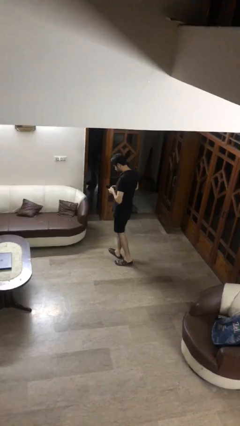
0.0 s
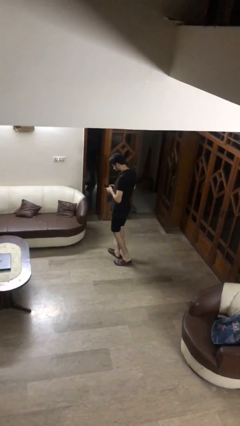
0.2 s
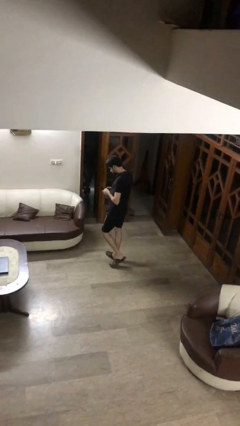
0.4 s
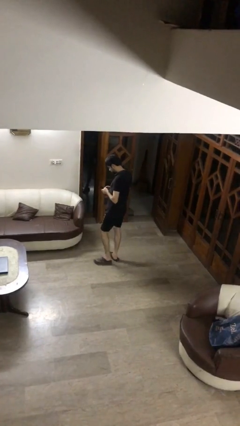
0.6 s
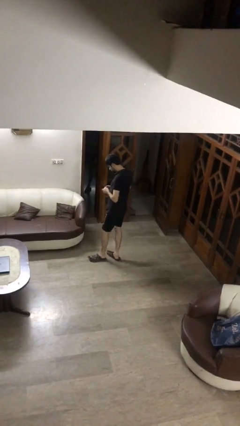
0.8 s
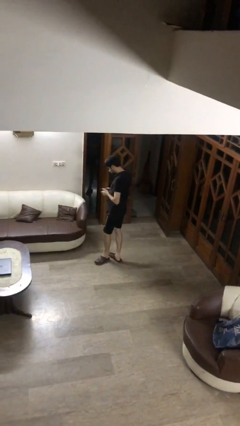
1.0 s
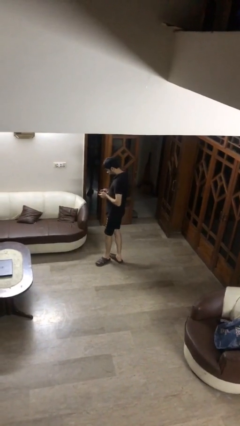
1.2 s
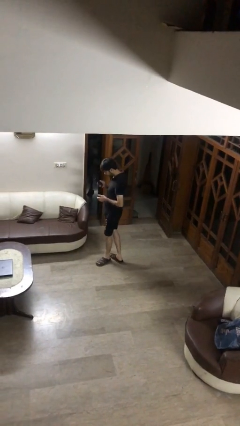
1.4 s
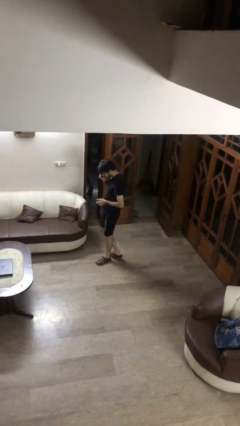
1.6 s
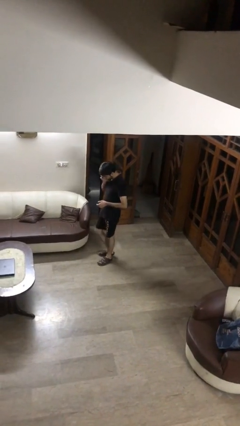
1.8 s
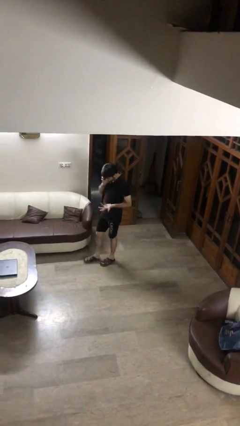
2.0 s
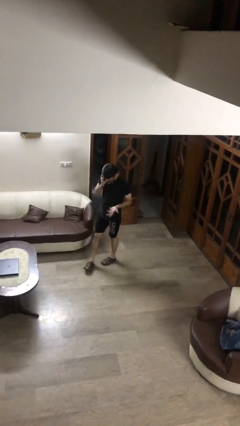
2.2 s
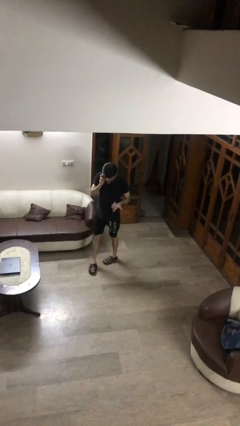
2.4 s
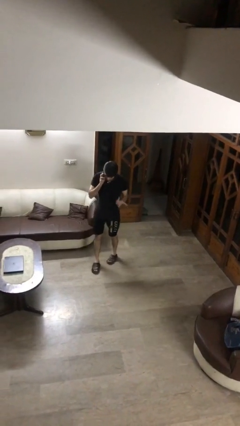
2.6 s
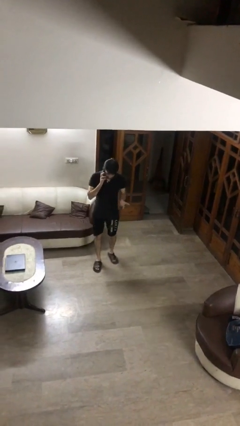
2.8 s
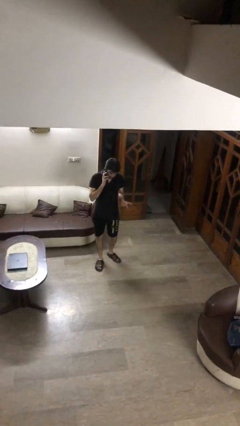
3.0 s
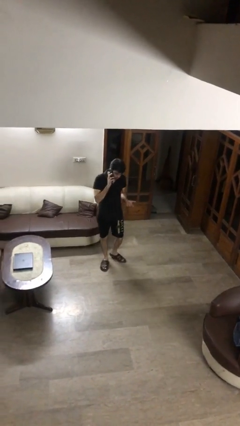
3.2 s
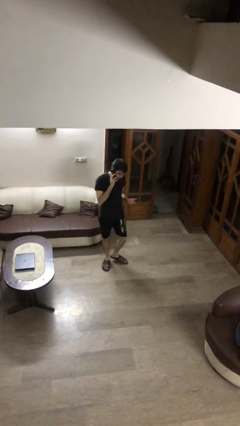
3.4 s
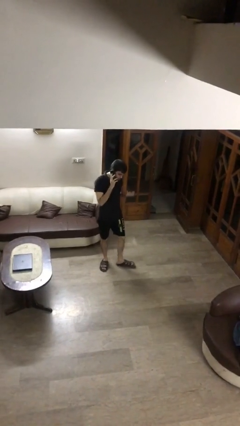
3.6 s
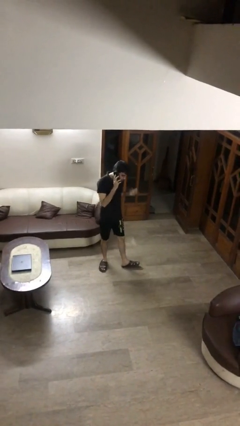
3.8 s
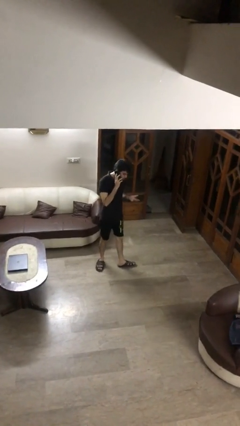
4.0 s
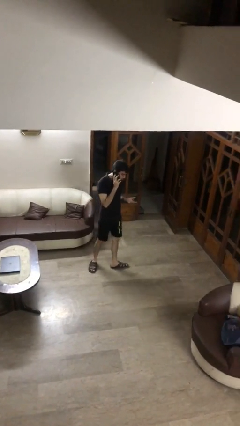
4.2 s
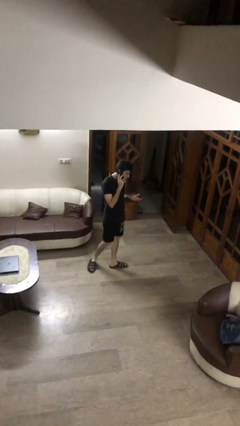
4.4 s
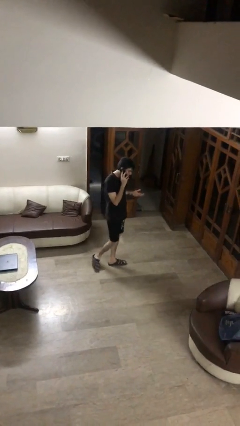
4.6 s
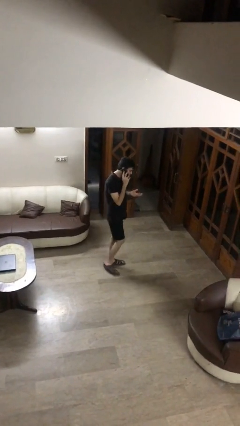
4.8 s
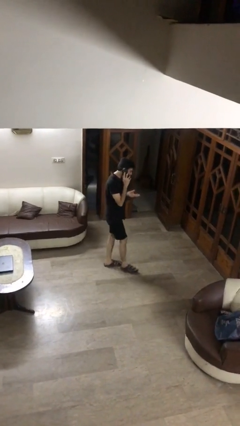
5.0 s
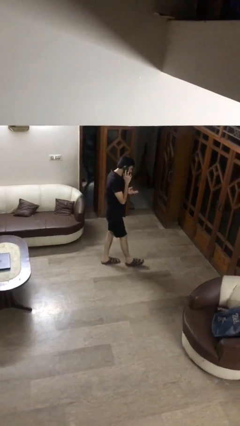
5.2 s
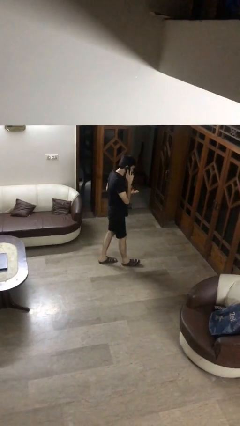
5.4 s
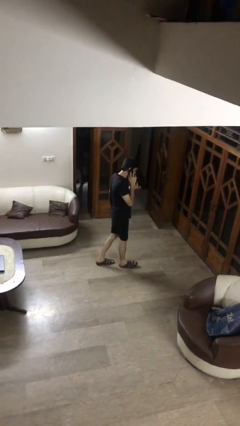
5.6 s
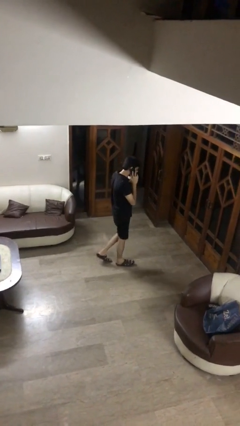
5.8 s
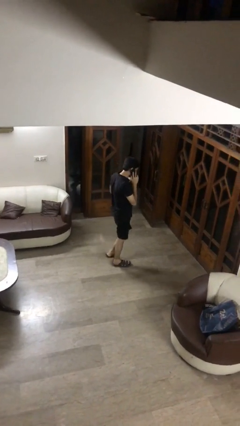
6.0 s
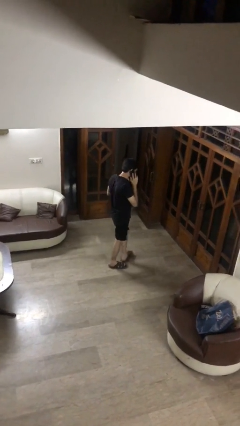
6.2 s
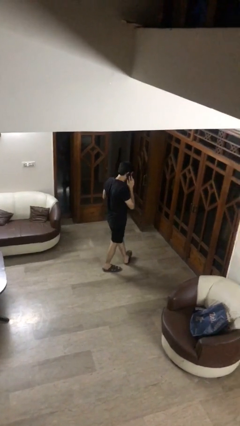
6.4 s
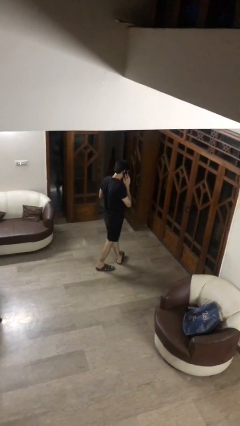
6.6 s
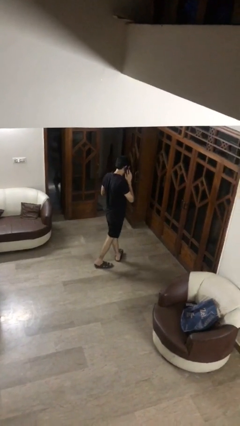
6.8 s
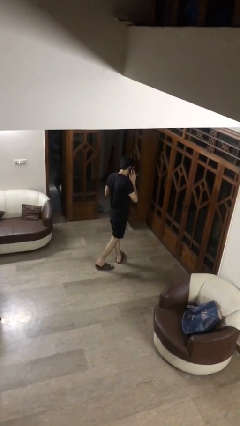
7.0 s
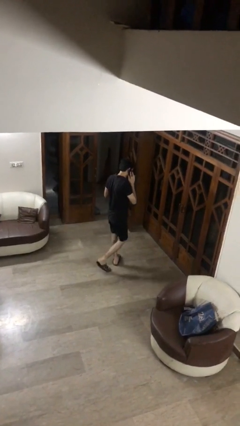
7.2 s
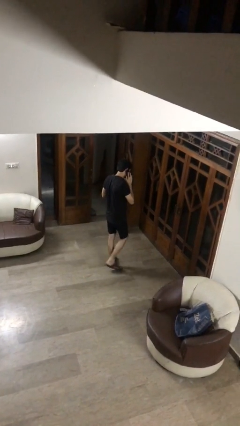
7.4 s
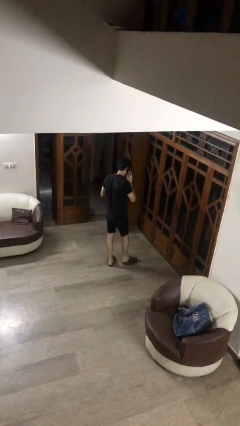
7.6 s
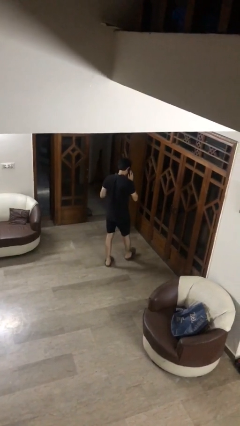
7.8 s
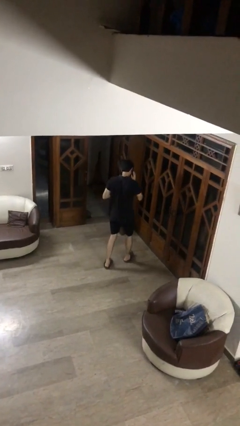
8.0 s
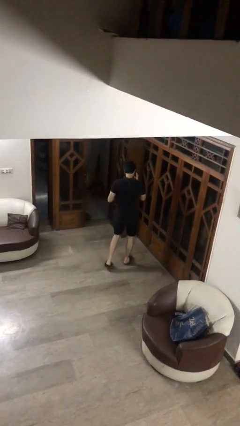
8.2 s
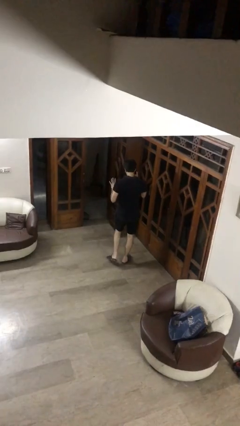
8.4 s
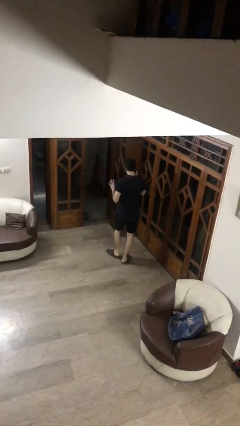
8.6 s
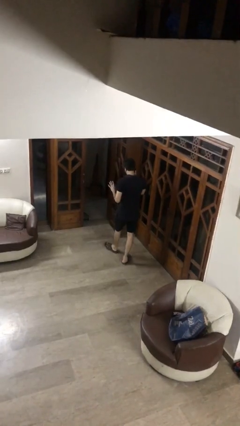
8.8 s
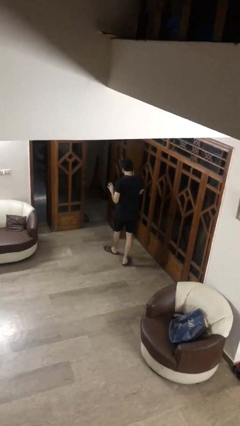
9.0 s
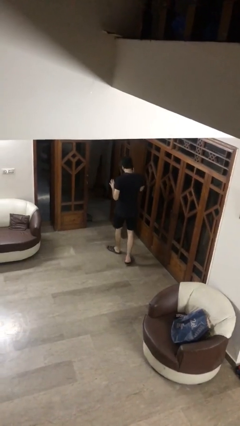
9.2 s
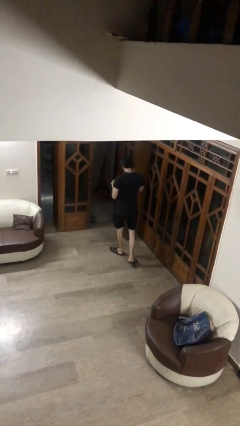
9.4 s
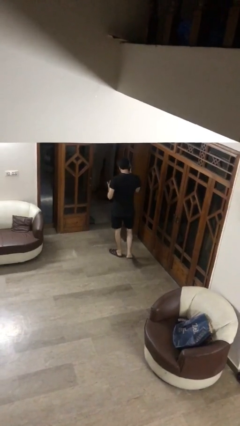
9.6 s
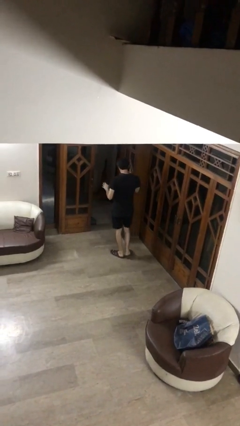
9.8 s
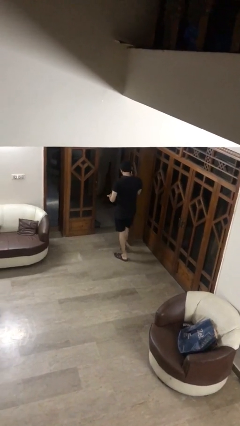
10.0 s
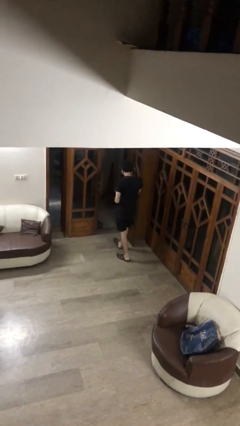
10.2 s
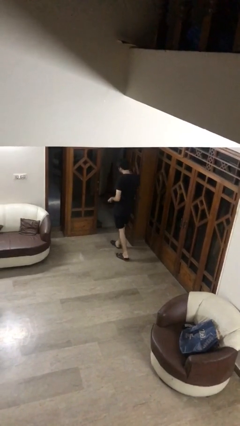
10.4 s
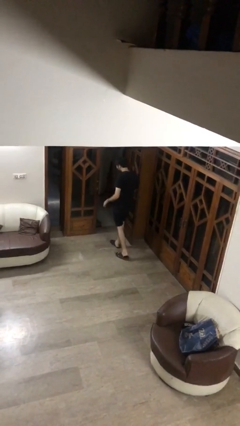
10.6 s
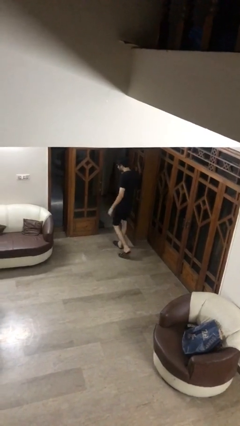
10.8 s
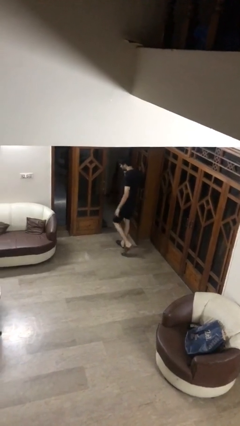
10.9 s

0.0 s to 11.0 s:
person talks on phone

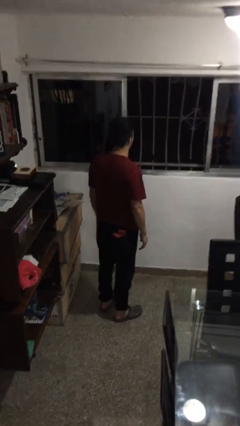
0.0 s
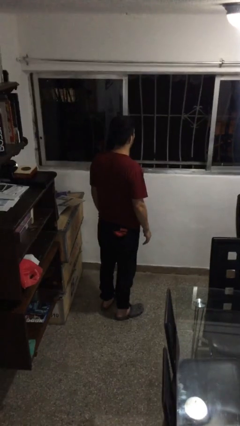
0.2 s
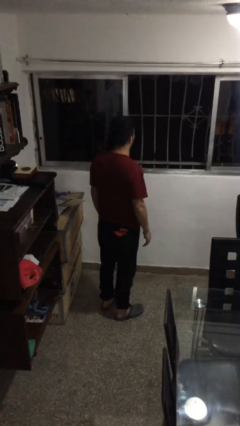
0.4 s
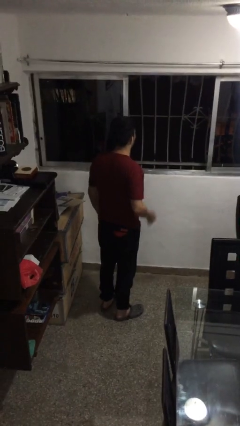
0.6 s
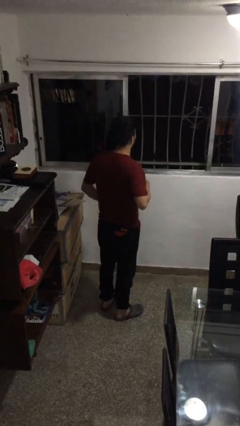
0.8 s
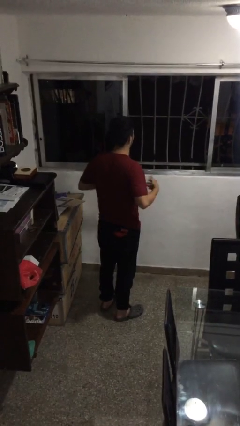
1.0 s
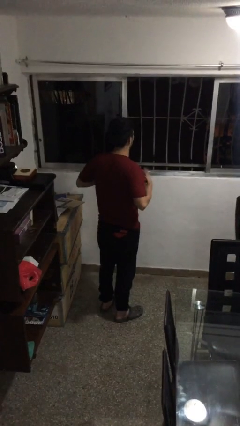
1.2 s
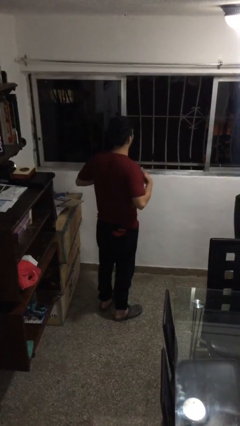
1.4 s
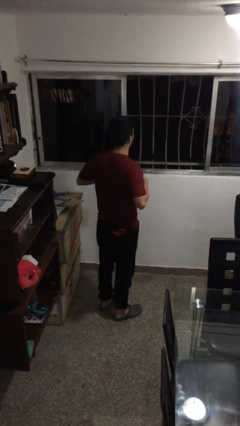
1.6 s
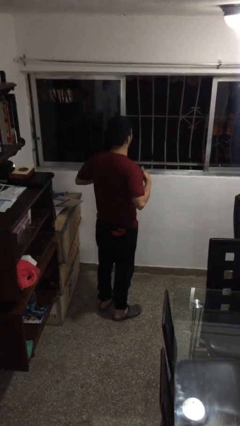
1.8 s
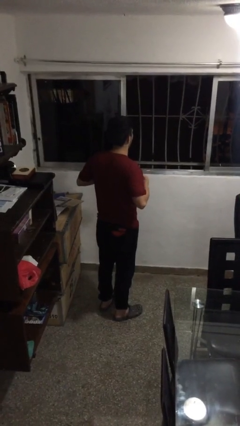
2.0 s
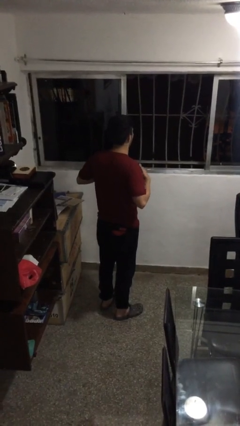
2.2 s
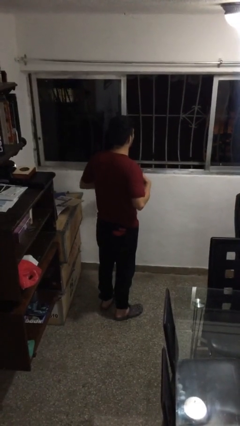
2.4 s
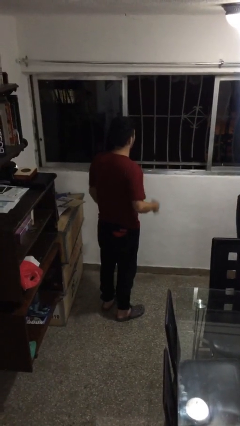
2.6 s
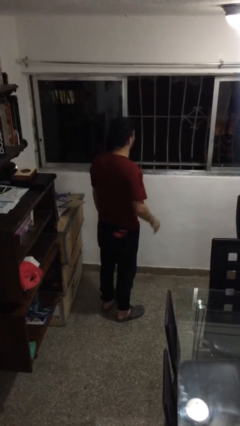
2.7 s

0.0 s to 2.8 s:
person drums on chest

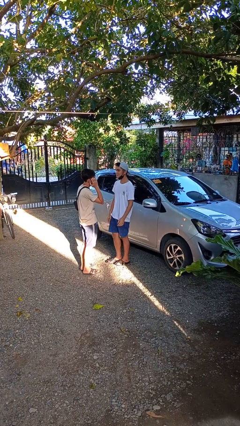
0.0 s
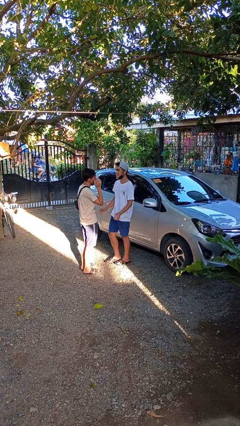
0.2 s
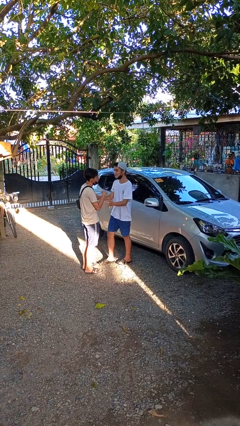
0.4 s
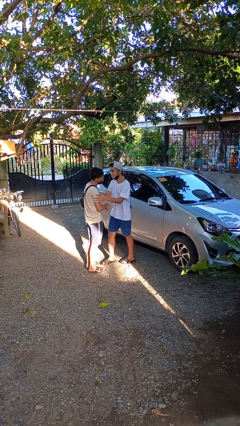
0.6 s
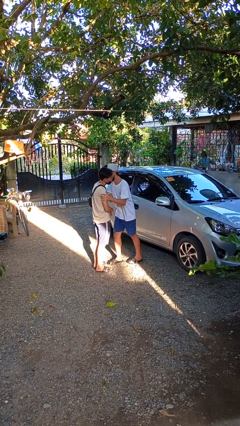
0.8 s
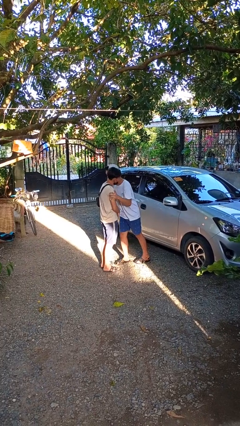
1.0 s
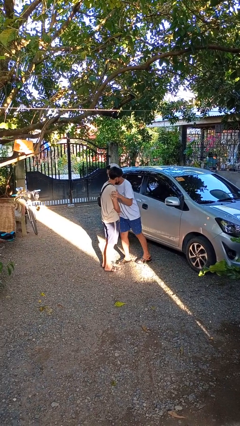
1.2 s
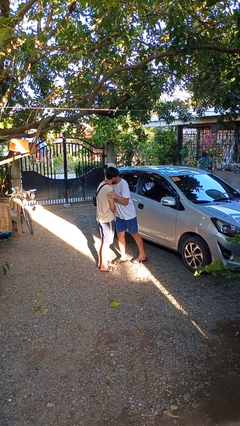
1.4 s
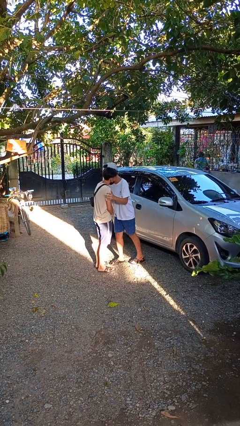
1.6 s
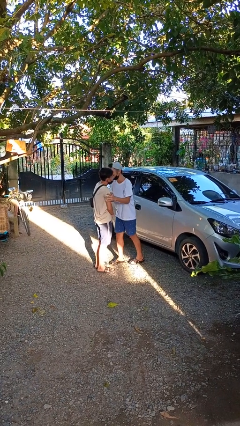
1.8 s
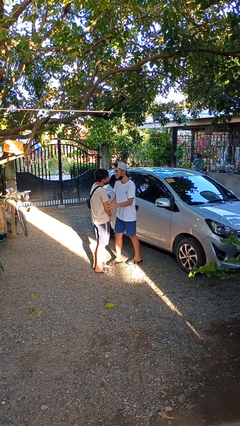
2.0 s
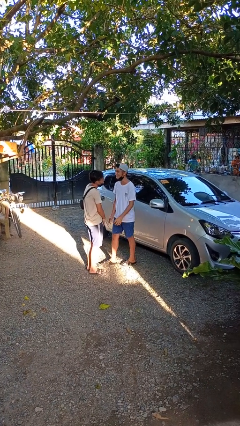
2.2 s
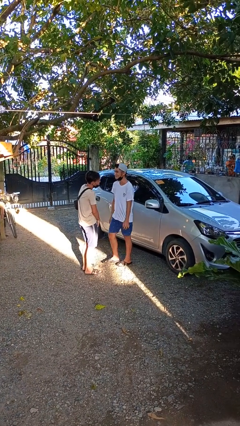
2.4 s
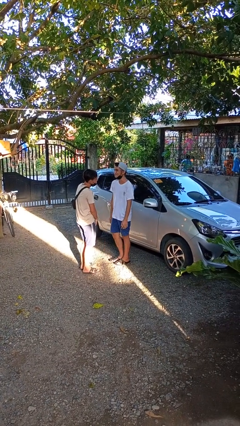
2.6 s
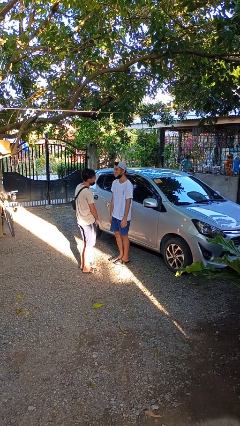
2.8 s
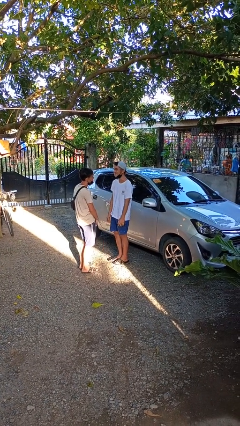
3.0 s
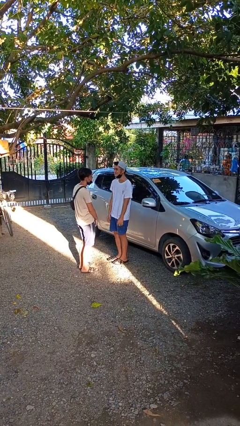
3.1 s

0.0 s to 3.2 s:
person kisses cheek of person

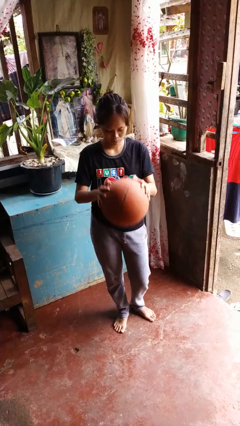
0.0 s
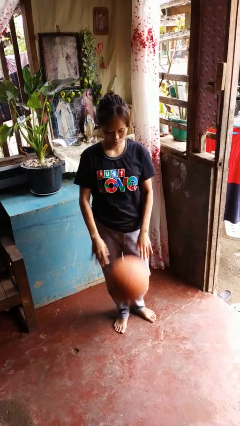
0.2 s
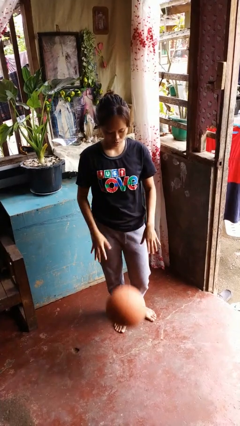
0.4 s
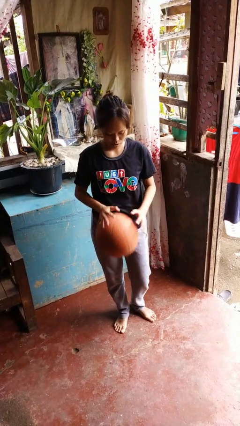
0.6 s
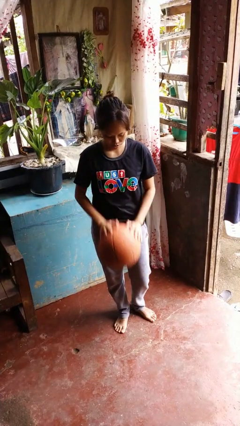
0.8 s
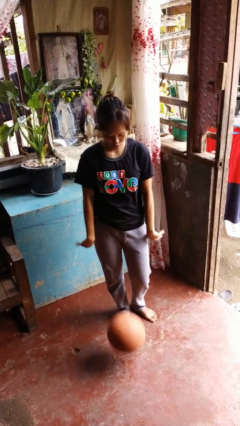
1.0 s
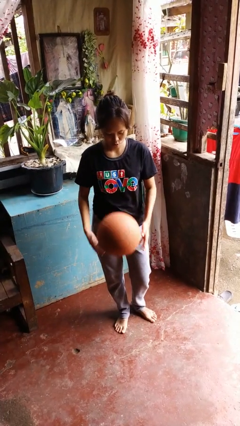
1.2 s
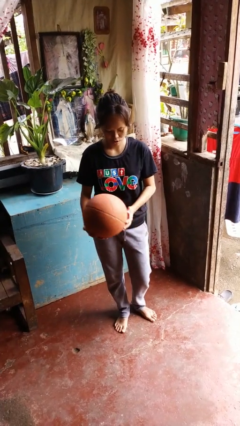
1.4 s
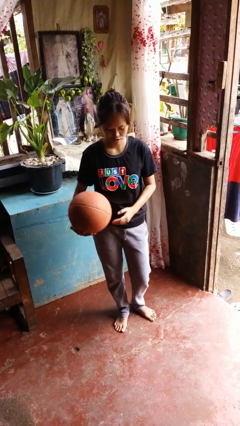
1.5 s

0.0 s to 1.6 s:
person bounces ball on floor
